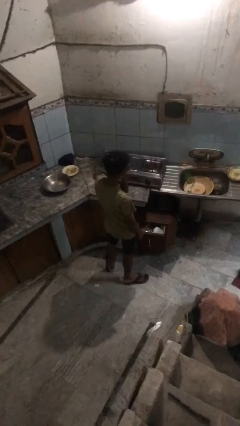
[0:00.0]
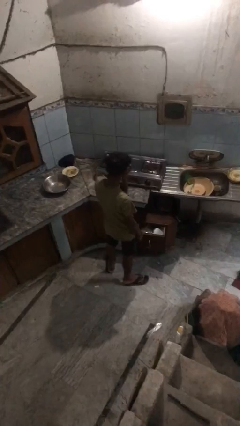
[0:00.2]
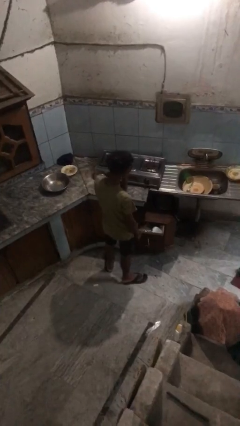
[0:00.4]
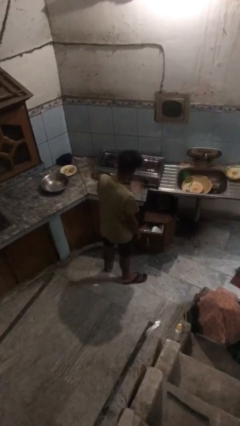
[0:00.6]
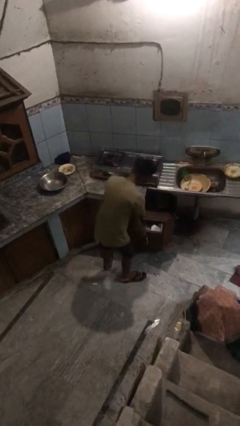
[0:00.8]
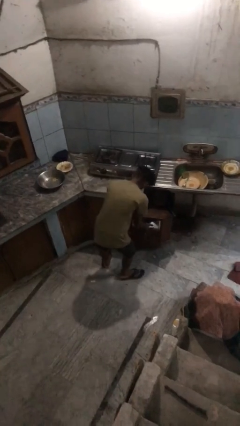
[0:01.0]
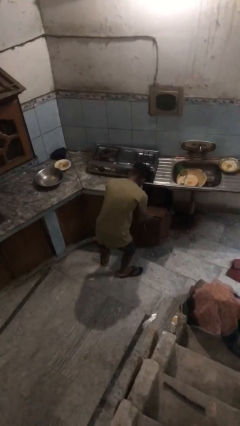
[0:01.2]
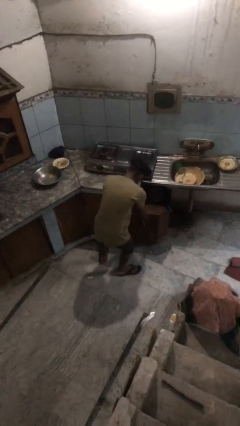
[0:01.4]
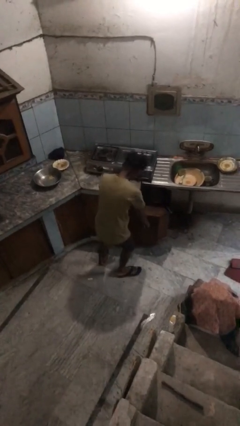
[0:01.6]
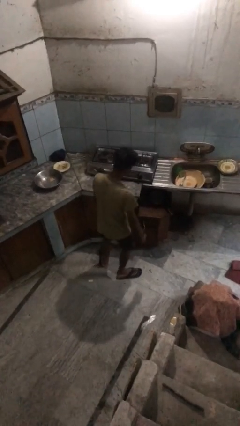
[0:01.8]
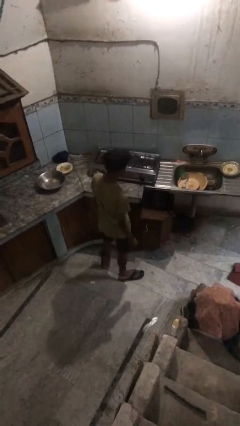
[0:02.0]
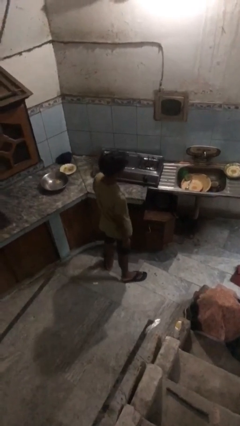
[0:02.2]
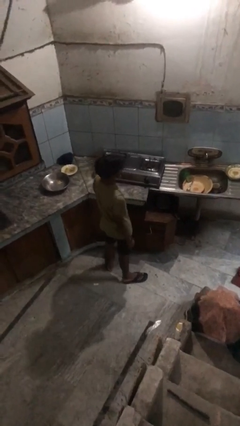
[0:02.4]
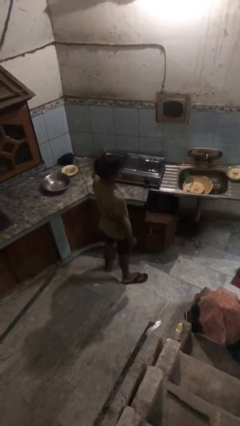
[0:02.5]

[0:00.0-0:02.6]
person closes kitchen drawer

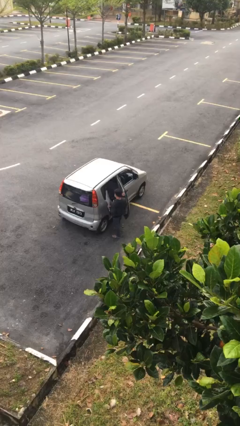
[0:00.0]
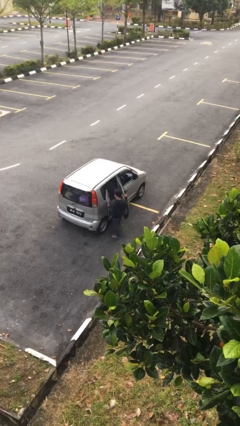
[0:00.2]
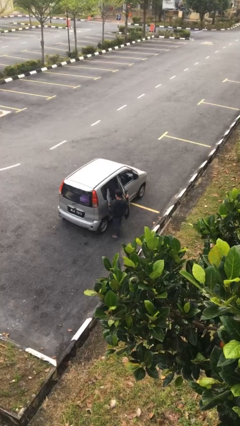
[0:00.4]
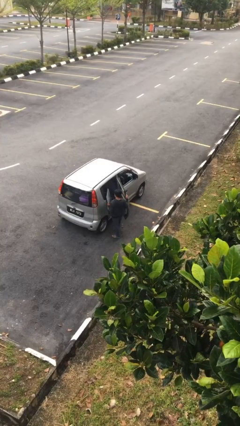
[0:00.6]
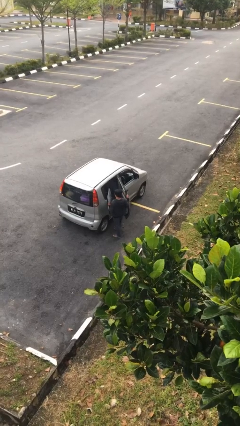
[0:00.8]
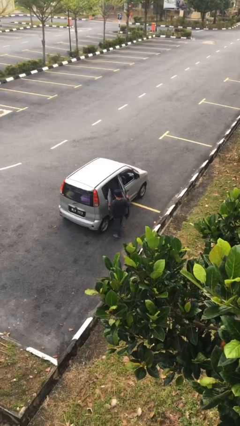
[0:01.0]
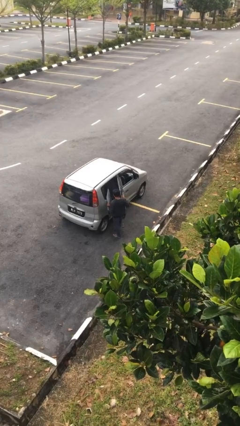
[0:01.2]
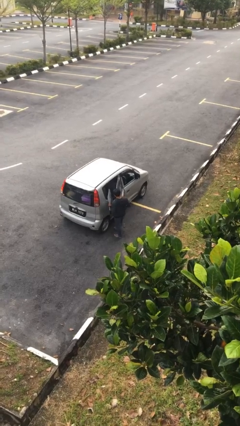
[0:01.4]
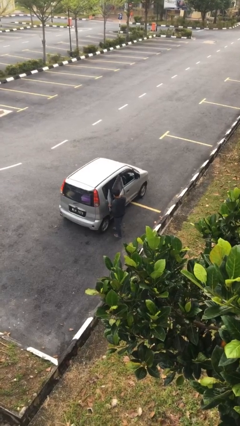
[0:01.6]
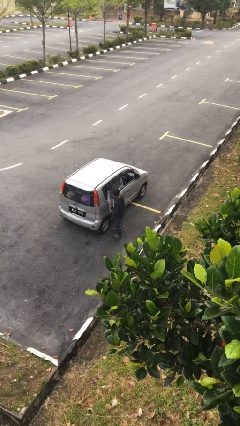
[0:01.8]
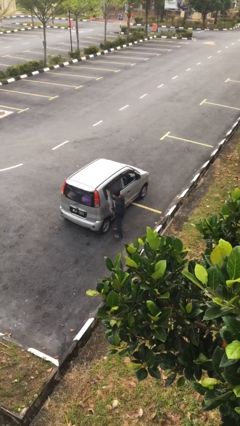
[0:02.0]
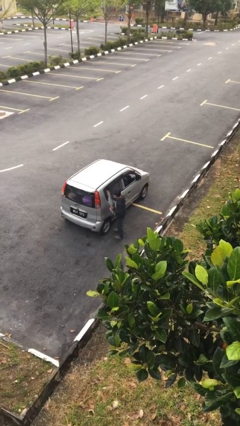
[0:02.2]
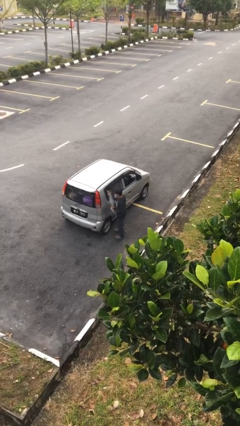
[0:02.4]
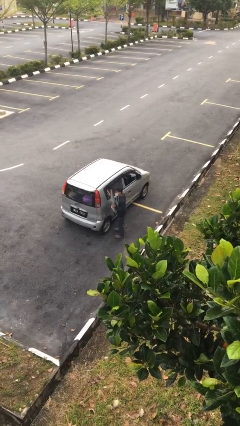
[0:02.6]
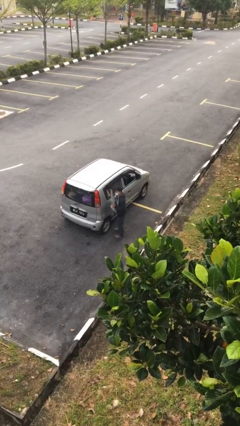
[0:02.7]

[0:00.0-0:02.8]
person closes car door

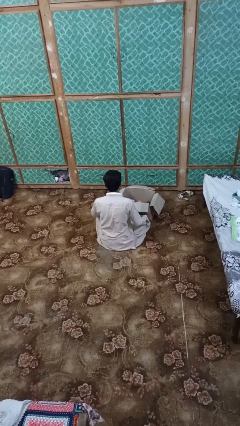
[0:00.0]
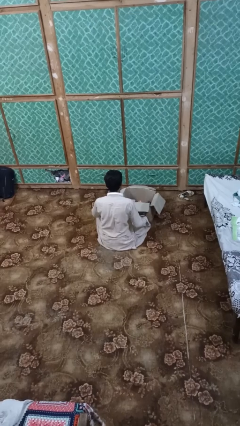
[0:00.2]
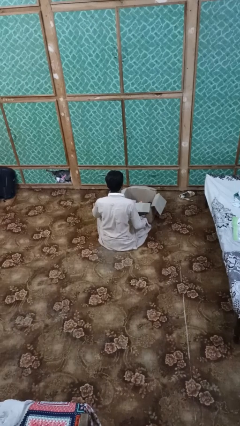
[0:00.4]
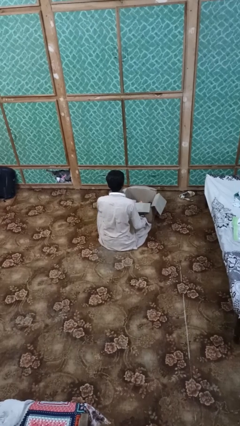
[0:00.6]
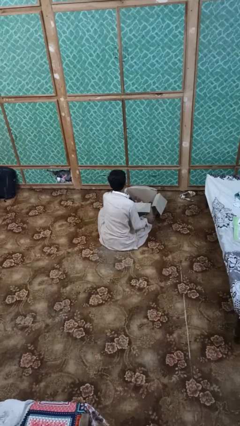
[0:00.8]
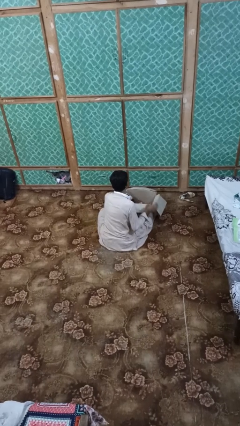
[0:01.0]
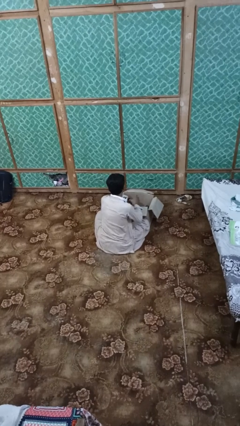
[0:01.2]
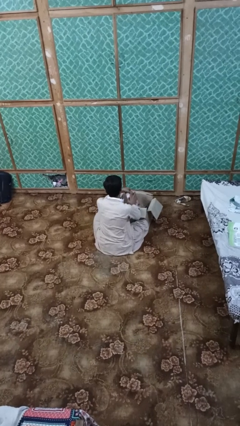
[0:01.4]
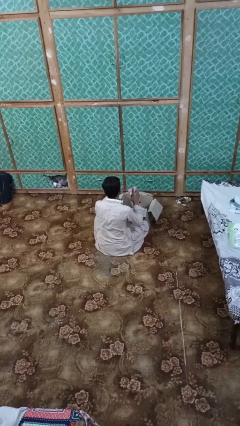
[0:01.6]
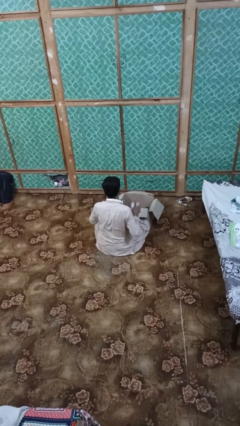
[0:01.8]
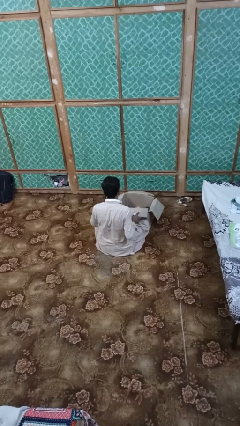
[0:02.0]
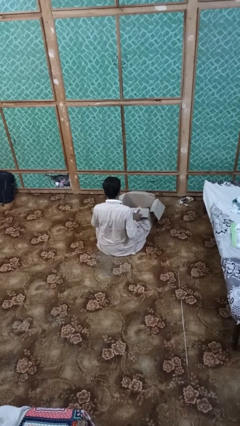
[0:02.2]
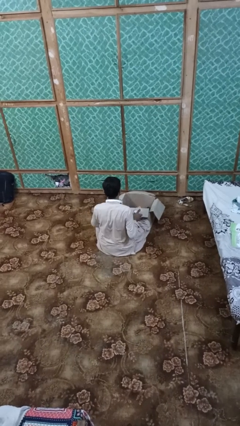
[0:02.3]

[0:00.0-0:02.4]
person takes object from box

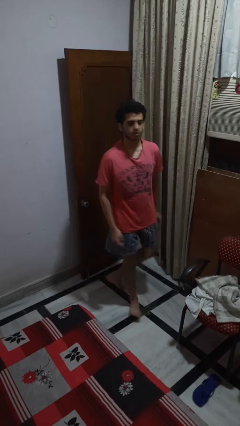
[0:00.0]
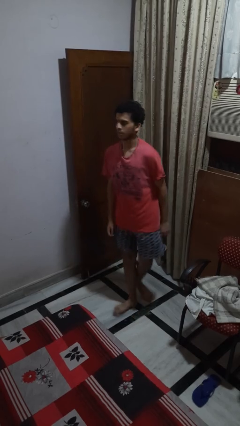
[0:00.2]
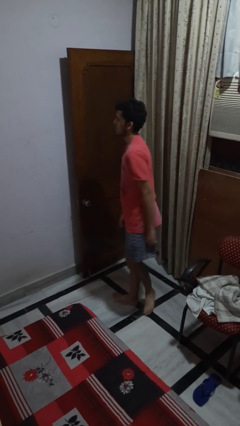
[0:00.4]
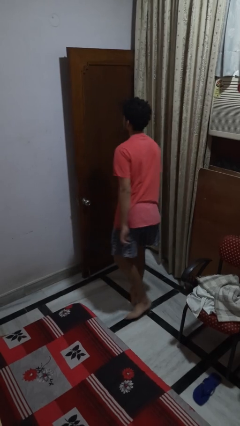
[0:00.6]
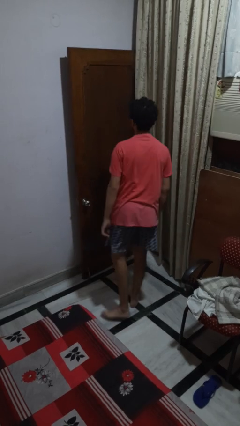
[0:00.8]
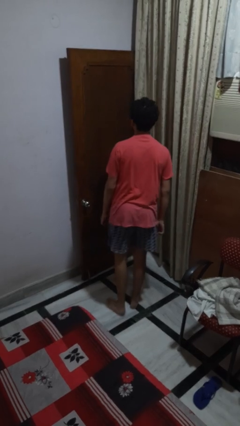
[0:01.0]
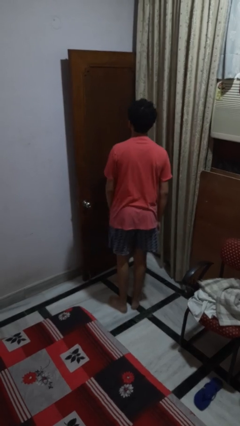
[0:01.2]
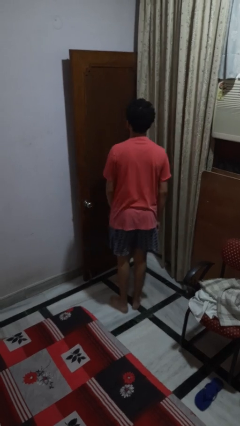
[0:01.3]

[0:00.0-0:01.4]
person twirls

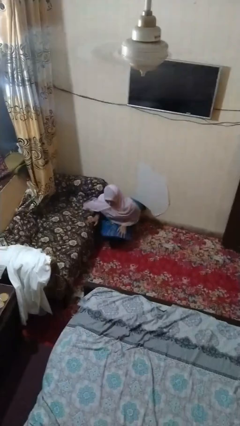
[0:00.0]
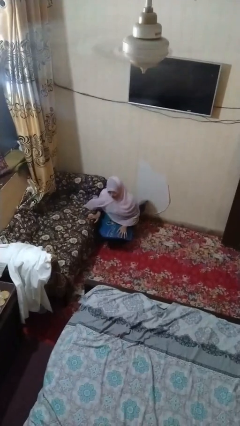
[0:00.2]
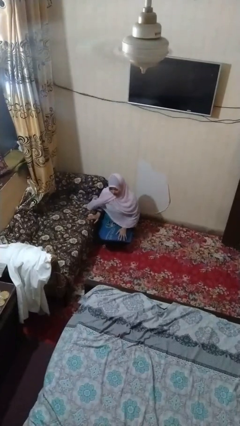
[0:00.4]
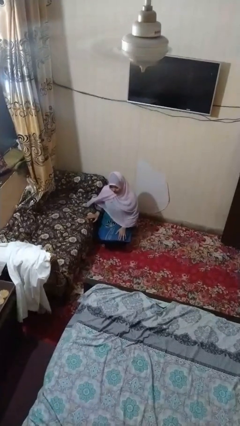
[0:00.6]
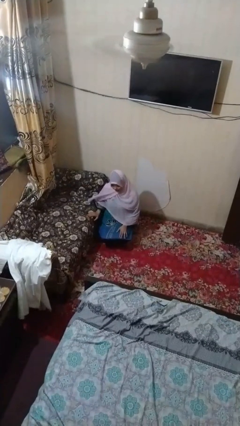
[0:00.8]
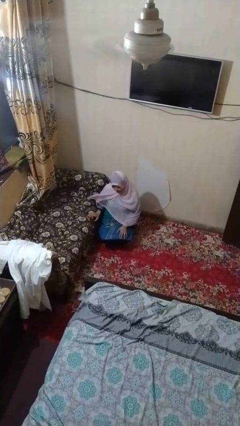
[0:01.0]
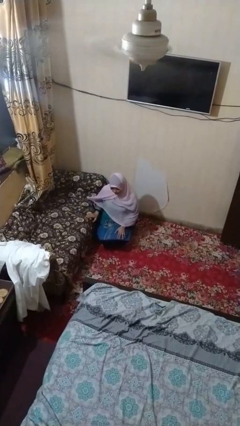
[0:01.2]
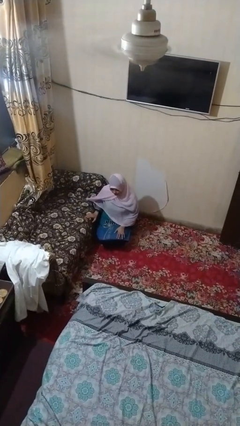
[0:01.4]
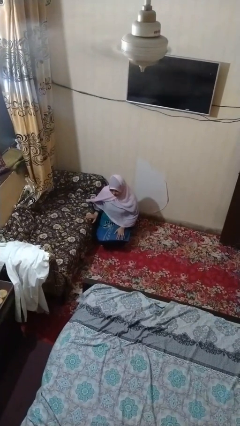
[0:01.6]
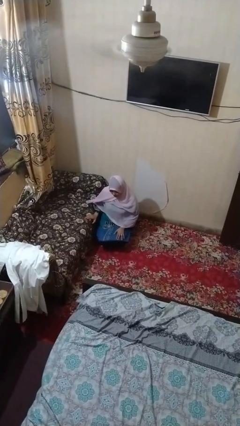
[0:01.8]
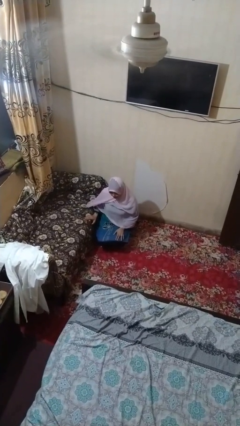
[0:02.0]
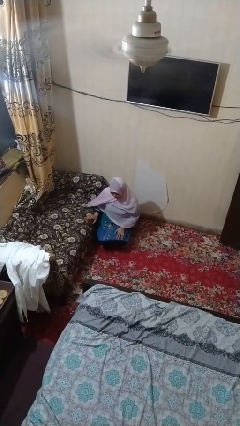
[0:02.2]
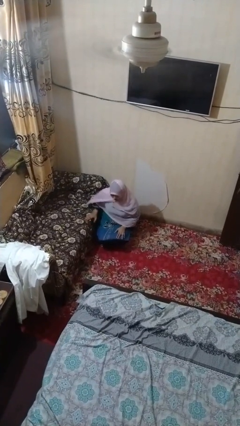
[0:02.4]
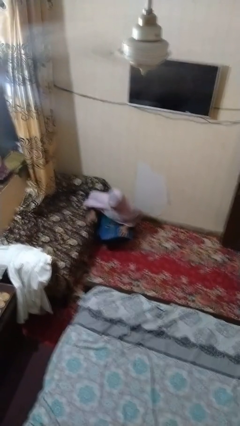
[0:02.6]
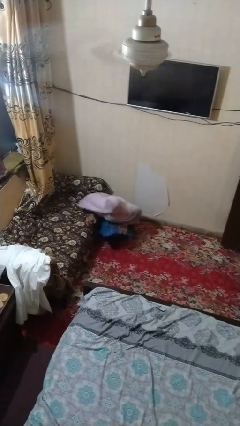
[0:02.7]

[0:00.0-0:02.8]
person squats

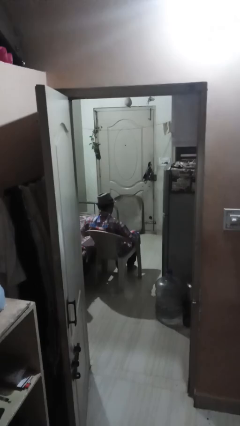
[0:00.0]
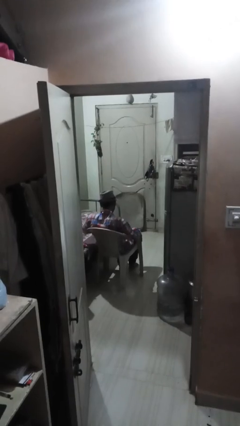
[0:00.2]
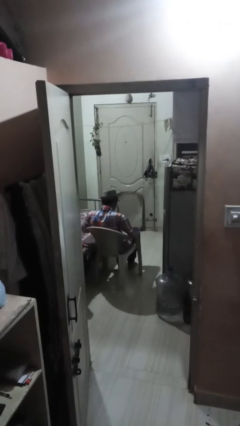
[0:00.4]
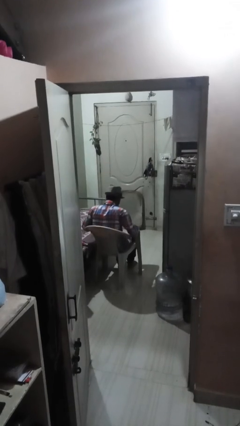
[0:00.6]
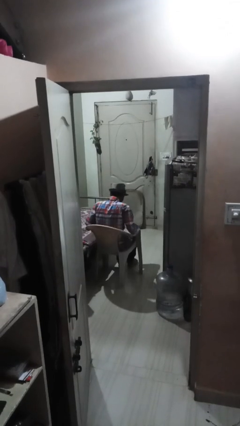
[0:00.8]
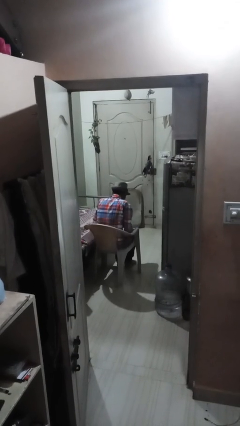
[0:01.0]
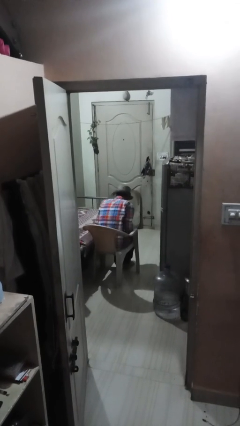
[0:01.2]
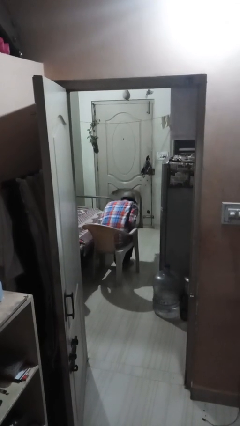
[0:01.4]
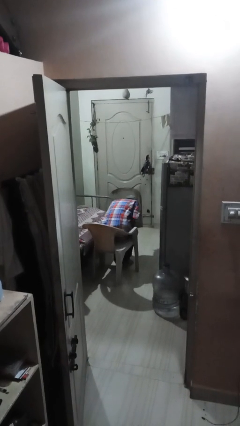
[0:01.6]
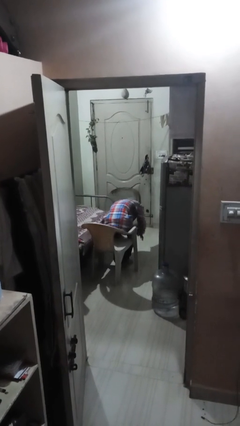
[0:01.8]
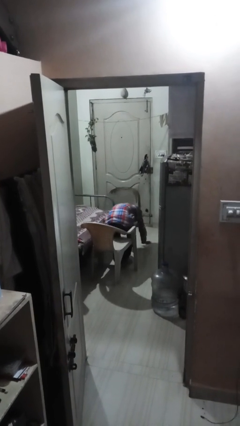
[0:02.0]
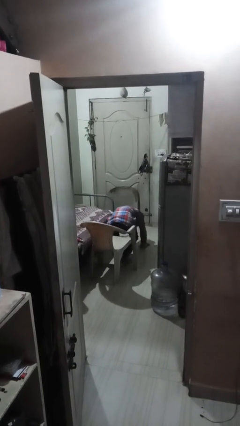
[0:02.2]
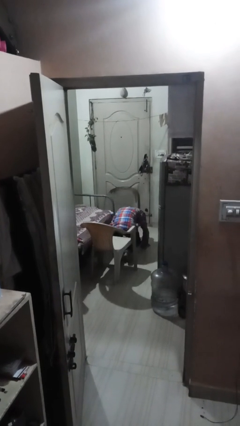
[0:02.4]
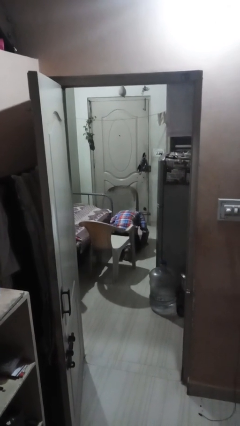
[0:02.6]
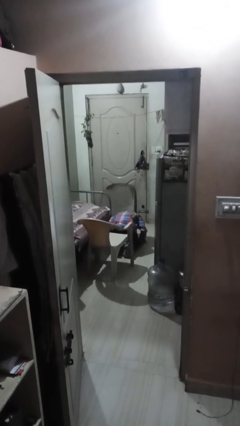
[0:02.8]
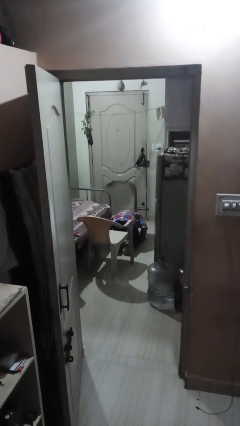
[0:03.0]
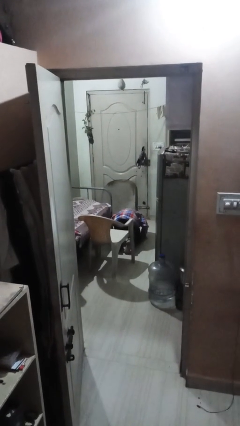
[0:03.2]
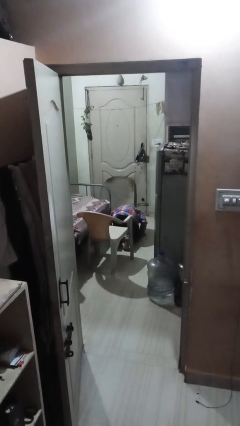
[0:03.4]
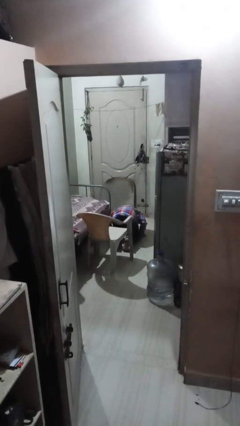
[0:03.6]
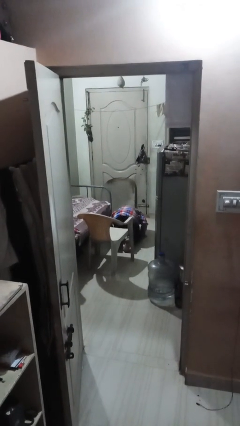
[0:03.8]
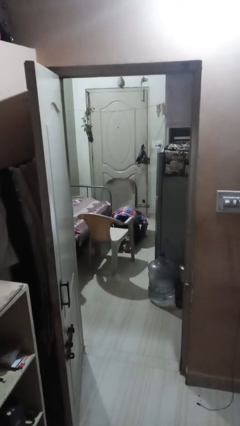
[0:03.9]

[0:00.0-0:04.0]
person falls from chair

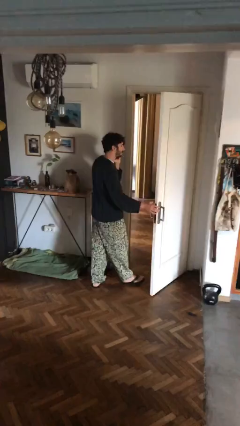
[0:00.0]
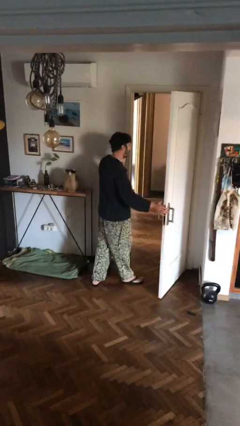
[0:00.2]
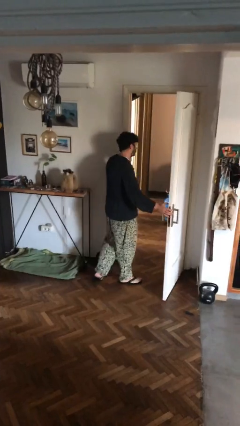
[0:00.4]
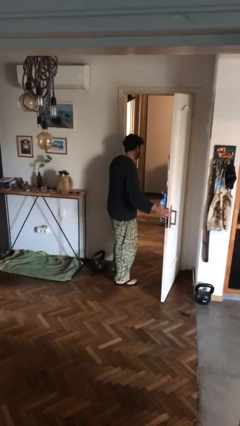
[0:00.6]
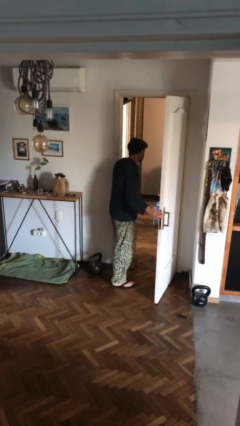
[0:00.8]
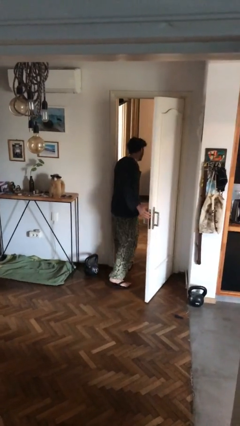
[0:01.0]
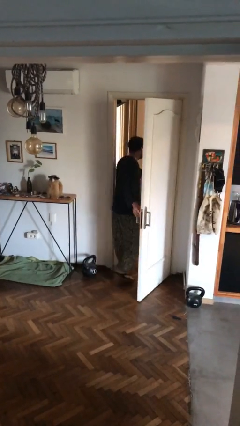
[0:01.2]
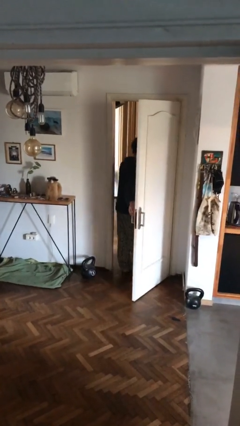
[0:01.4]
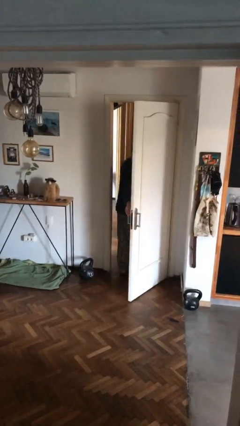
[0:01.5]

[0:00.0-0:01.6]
person exits scene through structure
